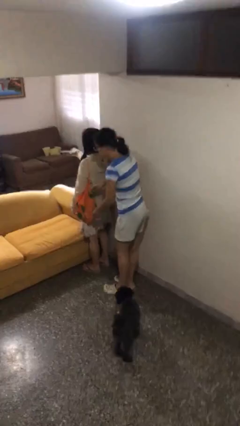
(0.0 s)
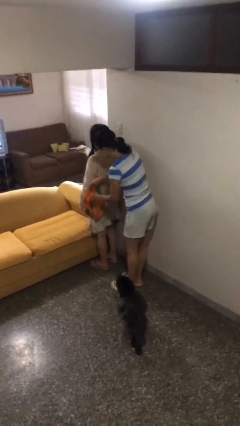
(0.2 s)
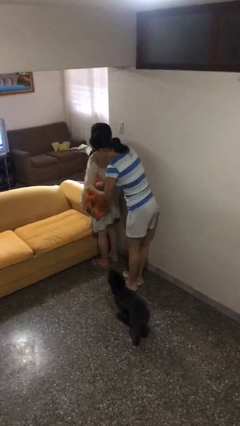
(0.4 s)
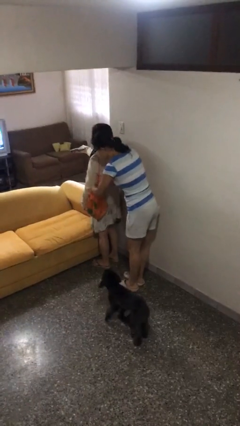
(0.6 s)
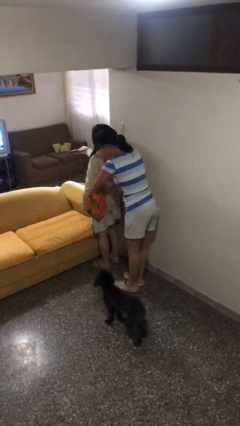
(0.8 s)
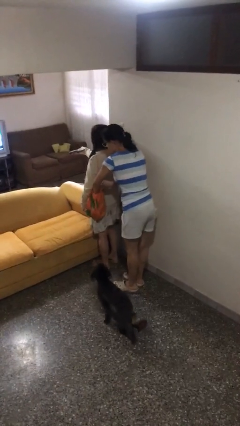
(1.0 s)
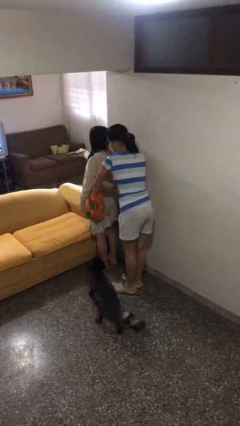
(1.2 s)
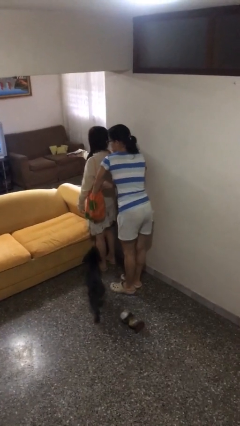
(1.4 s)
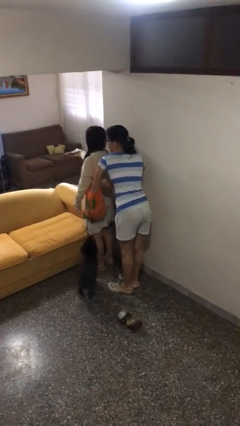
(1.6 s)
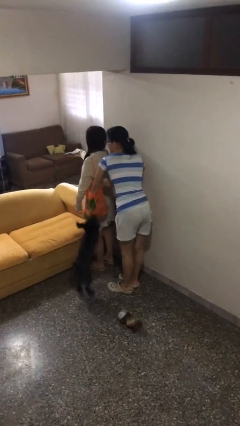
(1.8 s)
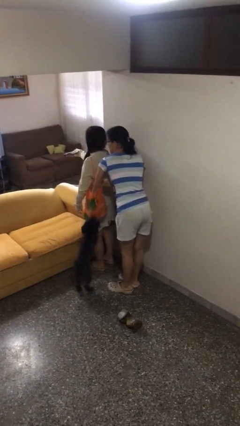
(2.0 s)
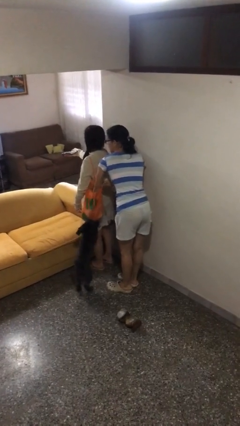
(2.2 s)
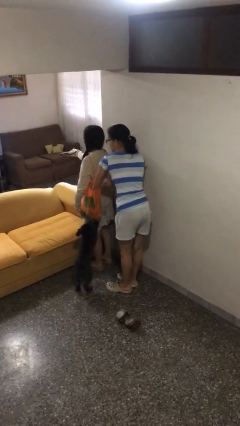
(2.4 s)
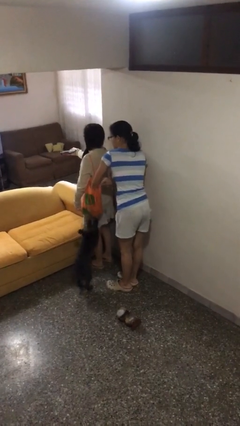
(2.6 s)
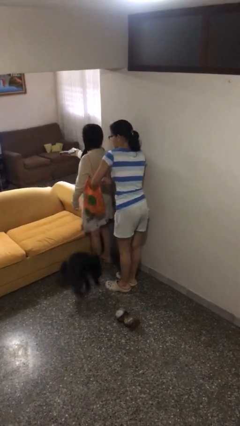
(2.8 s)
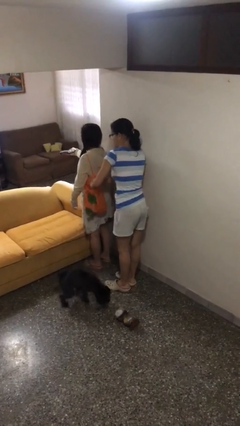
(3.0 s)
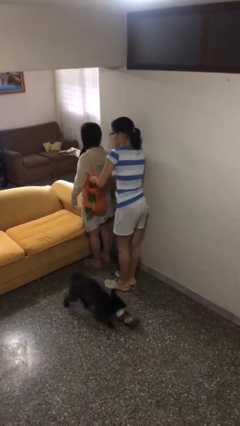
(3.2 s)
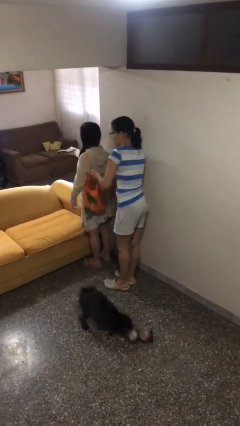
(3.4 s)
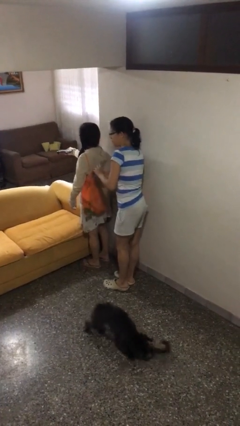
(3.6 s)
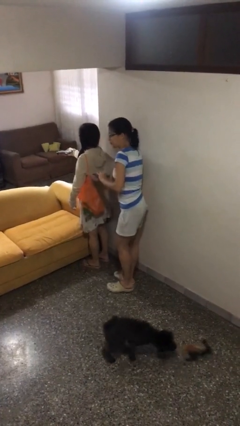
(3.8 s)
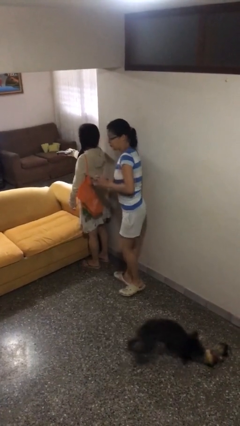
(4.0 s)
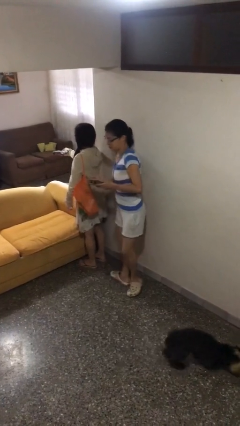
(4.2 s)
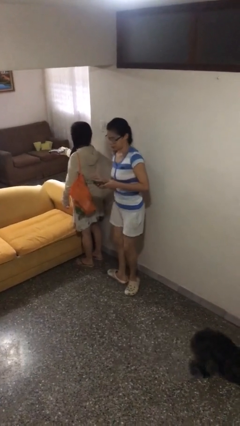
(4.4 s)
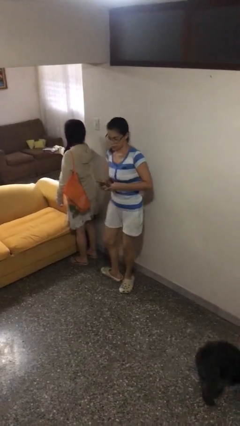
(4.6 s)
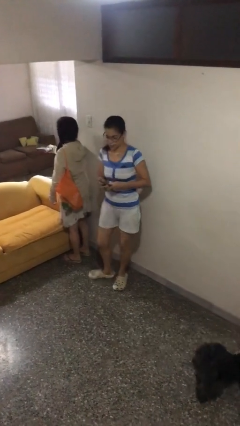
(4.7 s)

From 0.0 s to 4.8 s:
person steals object from person

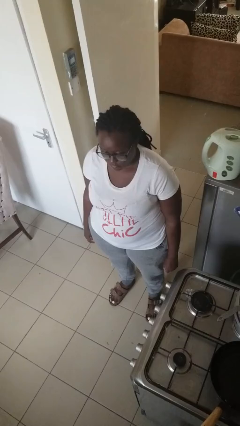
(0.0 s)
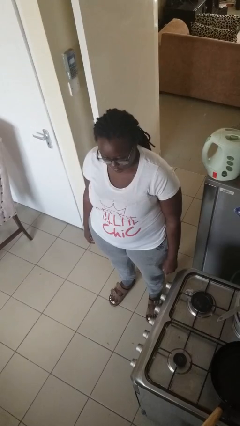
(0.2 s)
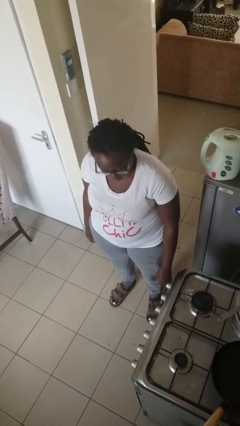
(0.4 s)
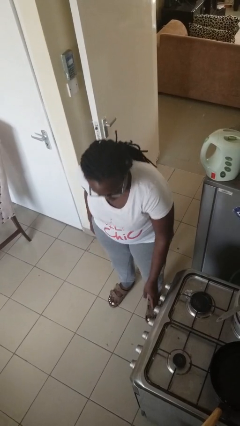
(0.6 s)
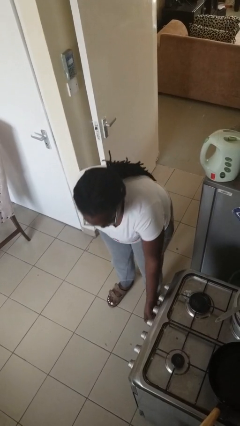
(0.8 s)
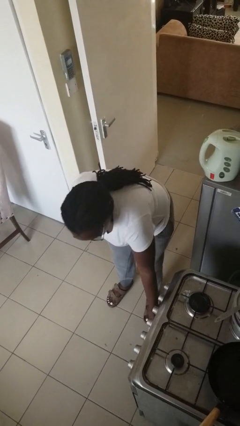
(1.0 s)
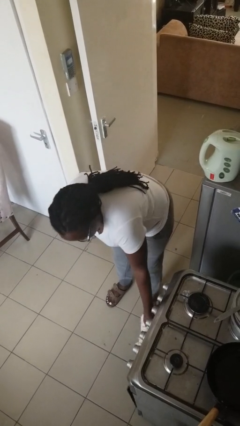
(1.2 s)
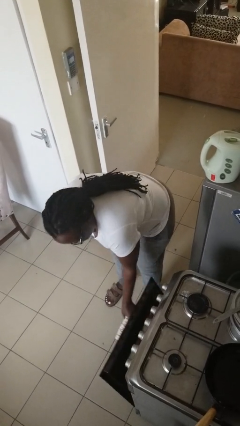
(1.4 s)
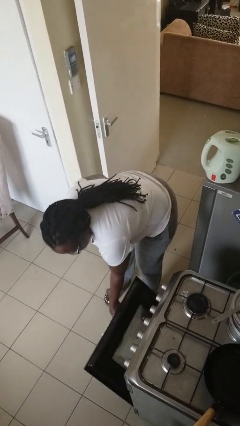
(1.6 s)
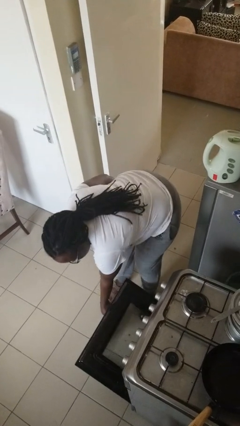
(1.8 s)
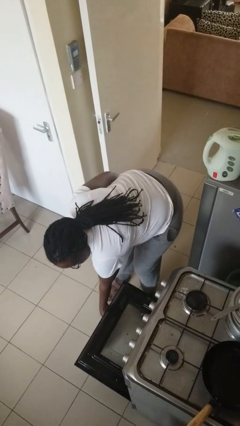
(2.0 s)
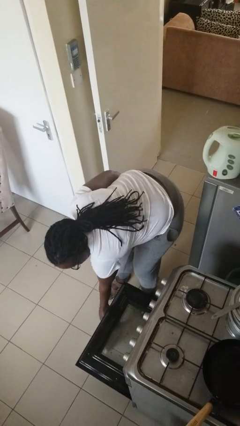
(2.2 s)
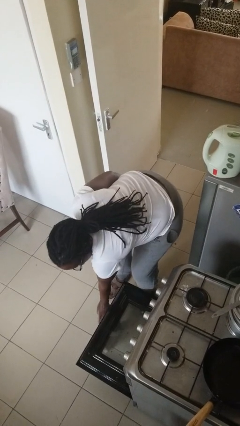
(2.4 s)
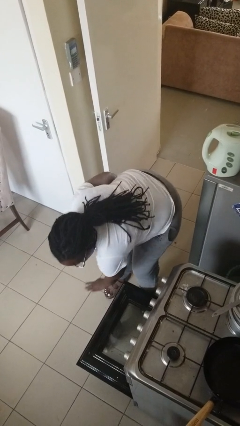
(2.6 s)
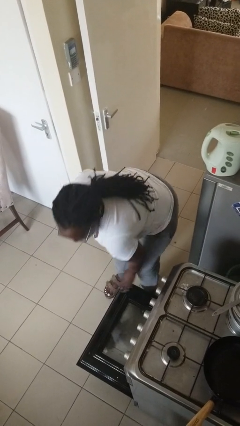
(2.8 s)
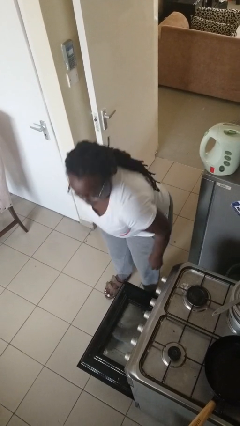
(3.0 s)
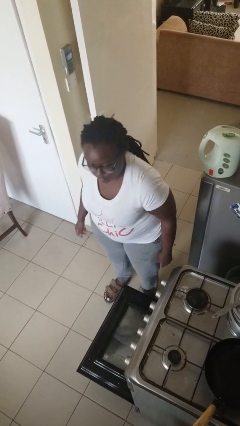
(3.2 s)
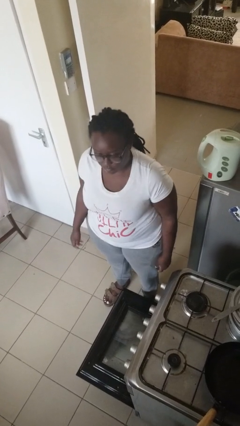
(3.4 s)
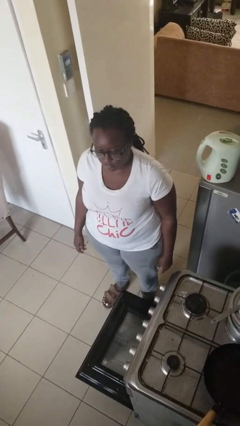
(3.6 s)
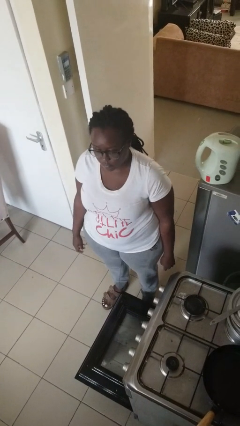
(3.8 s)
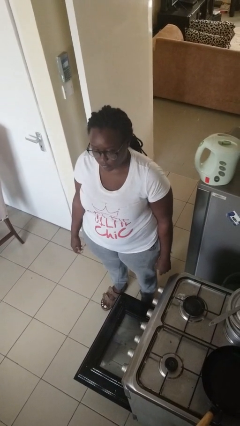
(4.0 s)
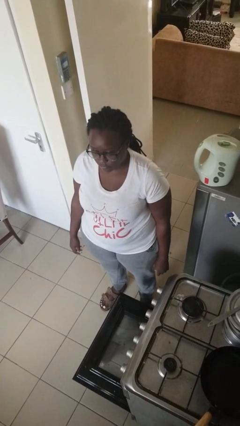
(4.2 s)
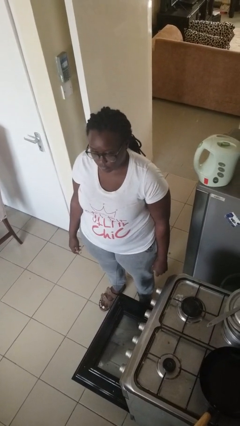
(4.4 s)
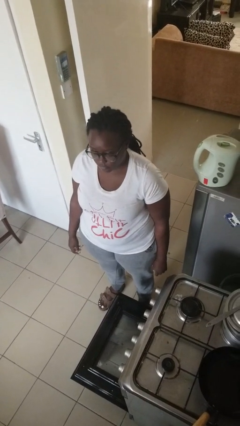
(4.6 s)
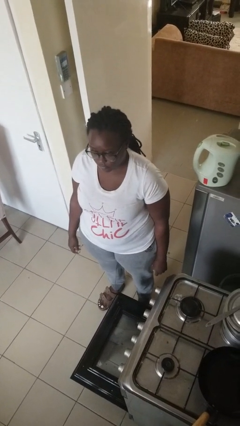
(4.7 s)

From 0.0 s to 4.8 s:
person opens oven door

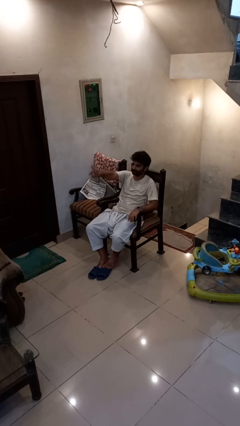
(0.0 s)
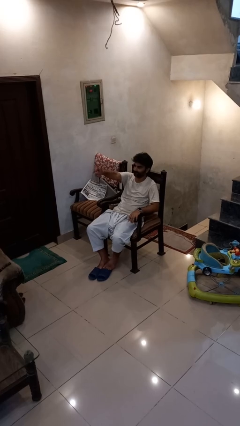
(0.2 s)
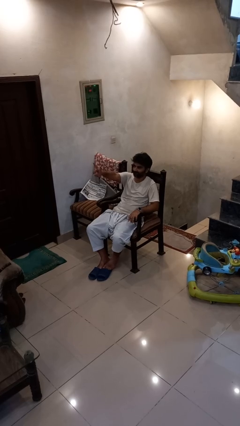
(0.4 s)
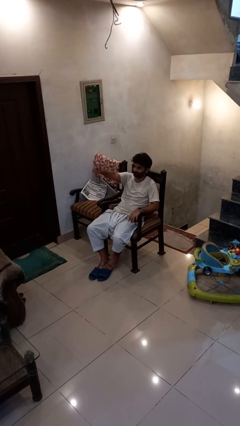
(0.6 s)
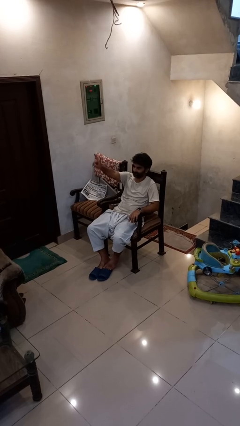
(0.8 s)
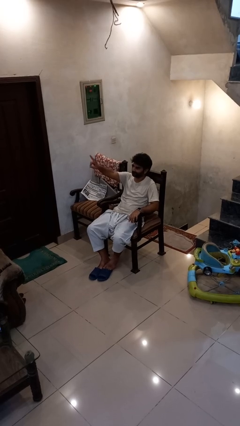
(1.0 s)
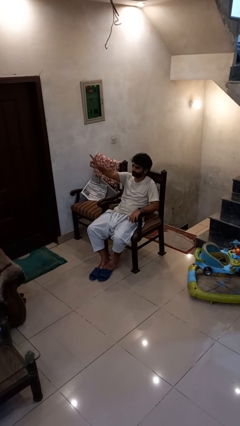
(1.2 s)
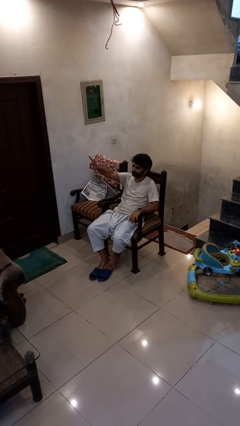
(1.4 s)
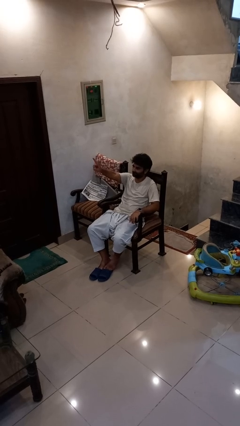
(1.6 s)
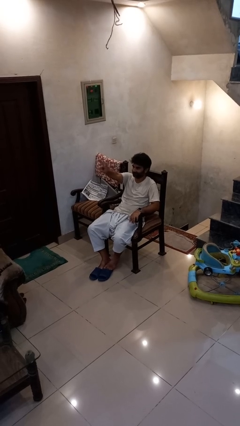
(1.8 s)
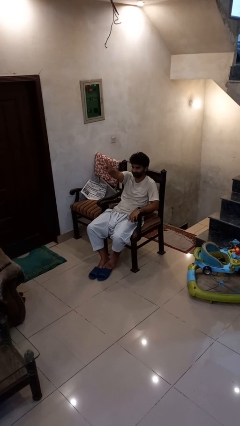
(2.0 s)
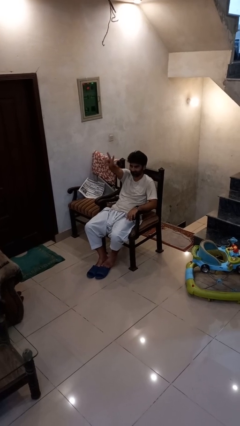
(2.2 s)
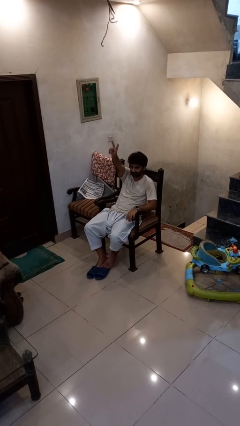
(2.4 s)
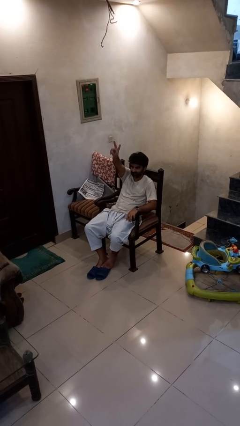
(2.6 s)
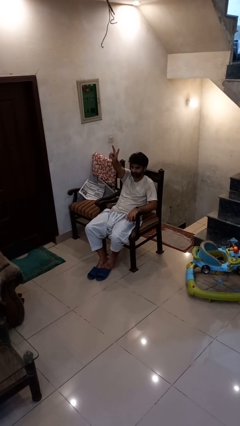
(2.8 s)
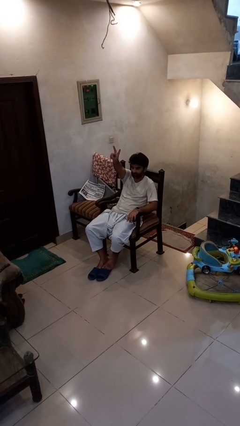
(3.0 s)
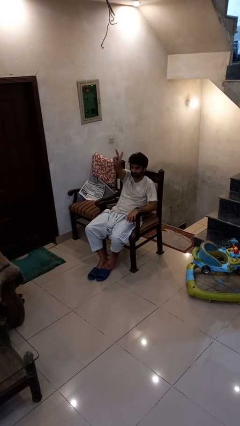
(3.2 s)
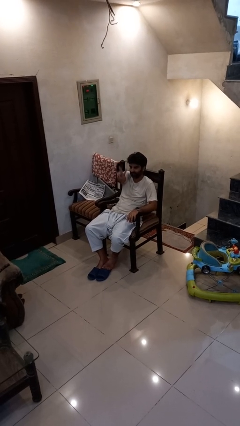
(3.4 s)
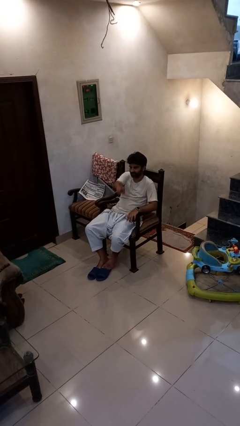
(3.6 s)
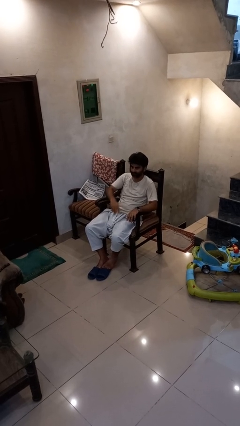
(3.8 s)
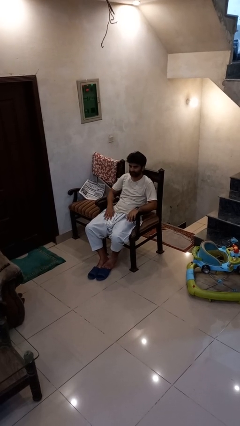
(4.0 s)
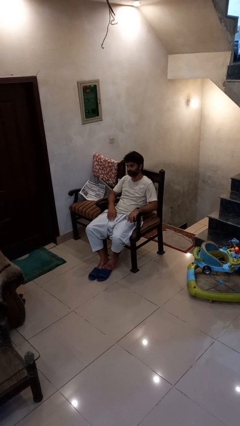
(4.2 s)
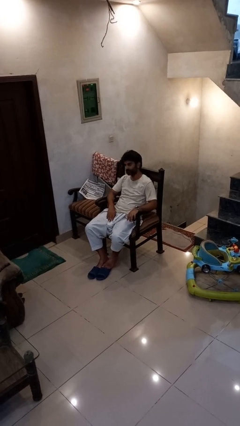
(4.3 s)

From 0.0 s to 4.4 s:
person gestures peace

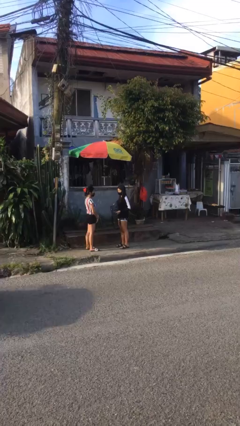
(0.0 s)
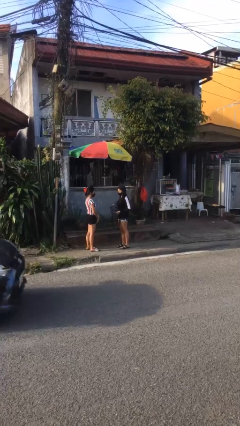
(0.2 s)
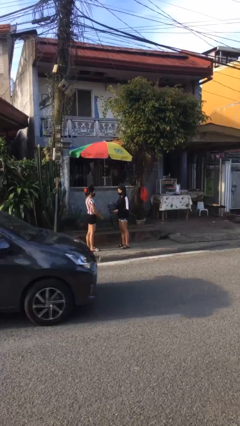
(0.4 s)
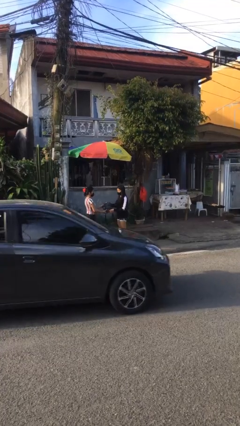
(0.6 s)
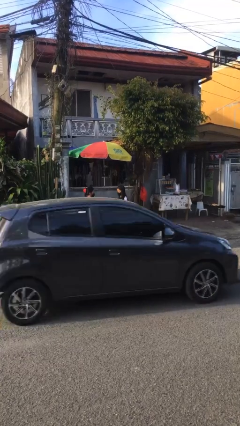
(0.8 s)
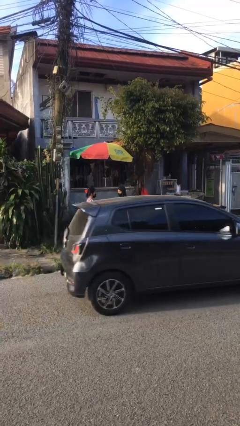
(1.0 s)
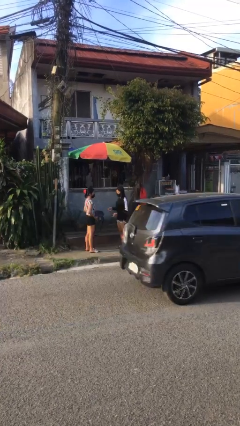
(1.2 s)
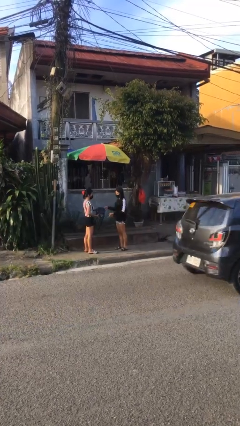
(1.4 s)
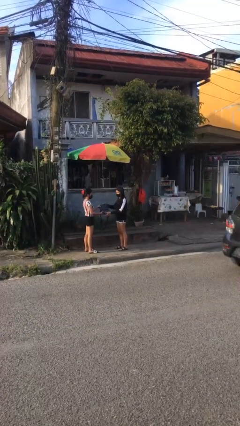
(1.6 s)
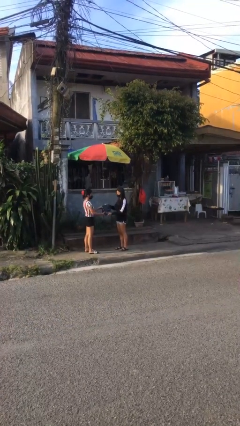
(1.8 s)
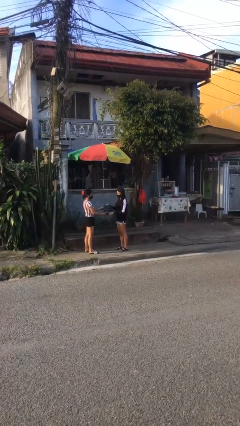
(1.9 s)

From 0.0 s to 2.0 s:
person transfers object to person

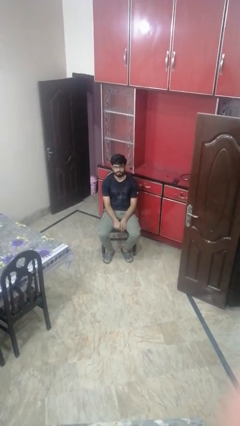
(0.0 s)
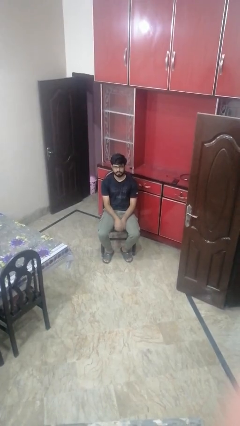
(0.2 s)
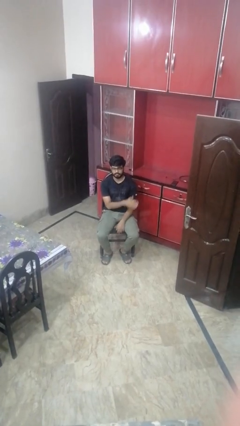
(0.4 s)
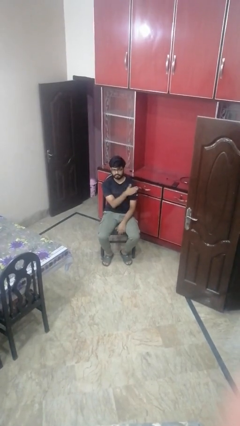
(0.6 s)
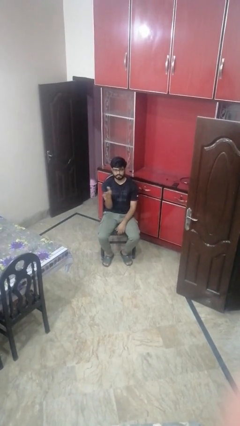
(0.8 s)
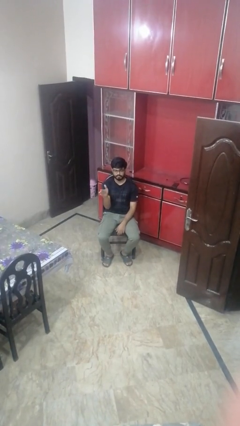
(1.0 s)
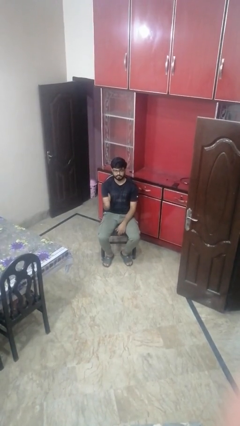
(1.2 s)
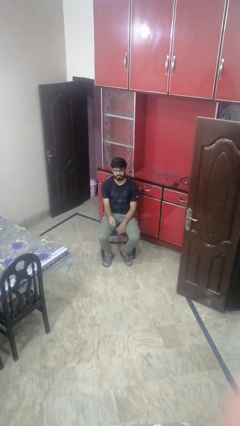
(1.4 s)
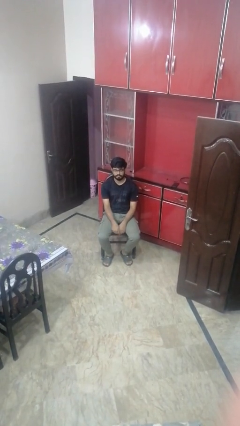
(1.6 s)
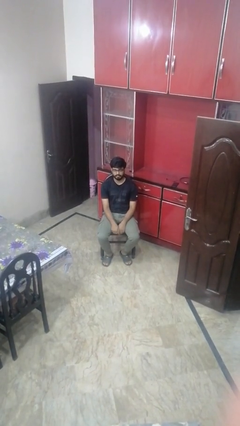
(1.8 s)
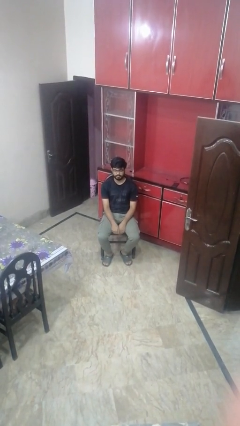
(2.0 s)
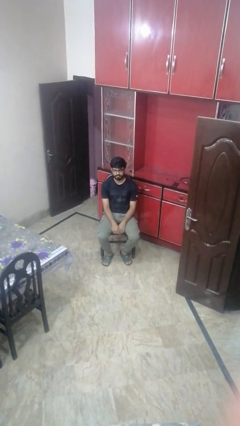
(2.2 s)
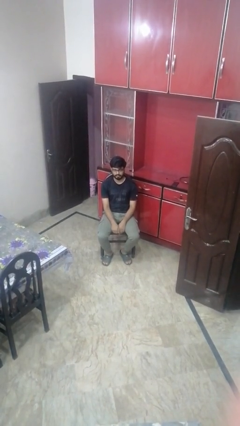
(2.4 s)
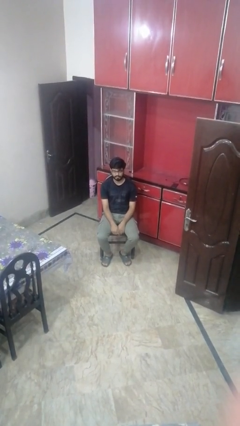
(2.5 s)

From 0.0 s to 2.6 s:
person gestures swipe right
